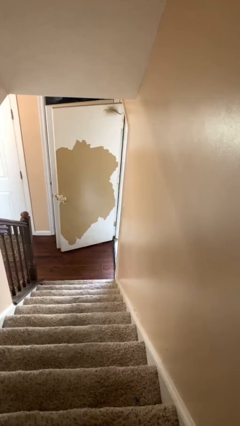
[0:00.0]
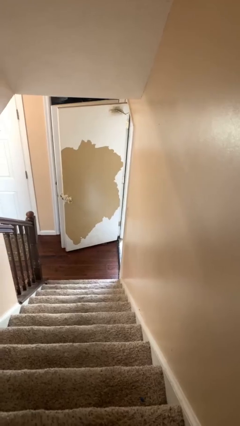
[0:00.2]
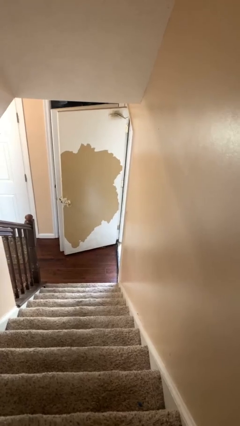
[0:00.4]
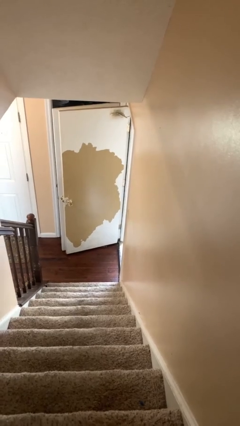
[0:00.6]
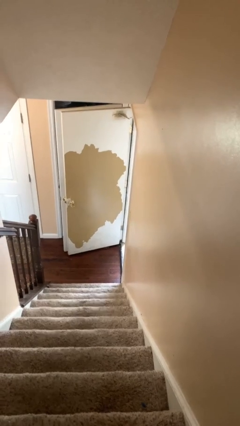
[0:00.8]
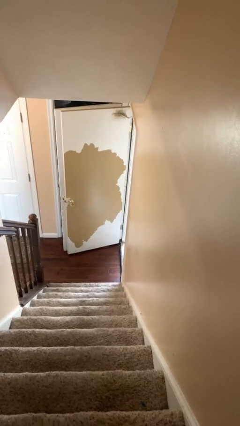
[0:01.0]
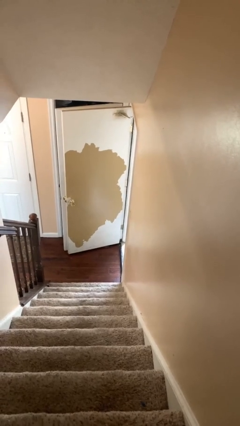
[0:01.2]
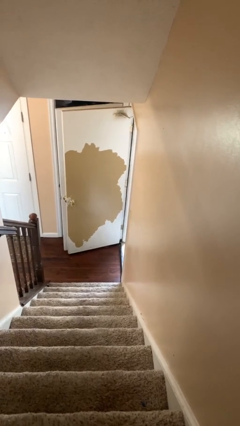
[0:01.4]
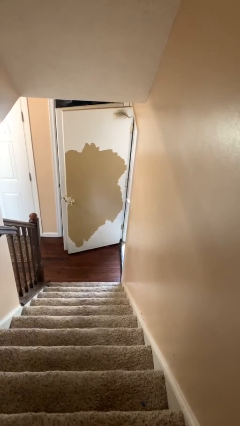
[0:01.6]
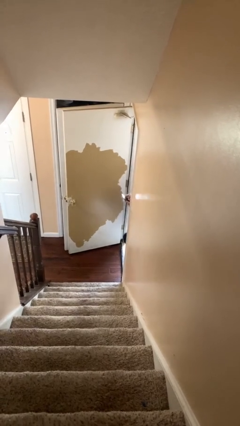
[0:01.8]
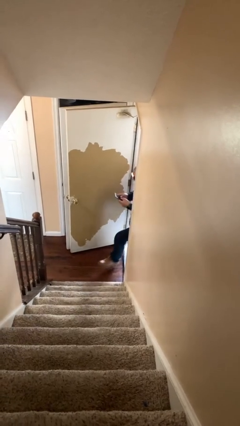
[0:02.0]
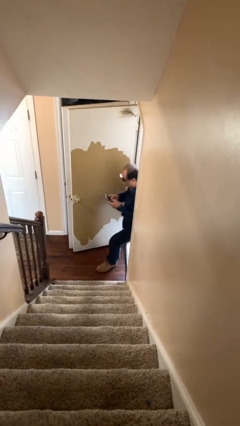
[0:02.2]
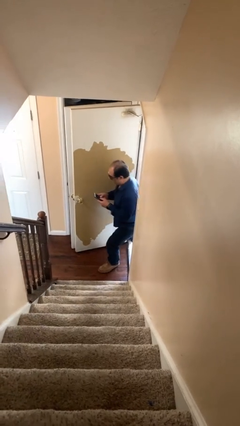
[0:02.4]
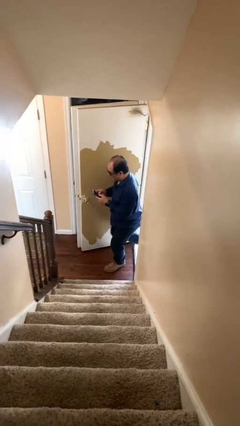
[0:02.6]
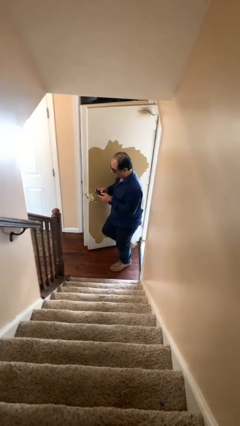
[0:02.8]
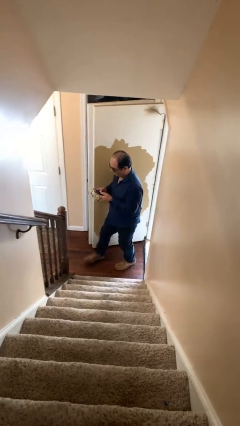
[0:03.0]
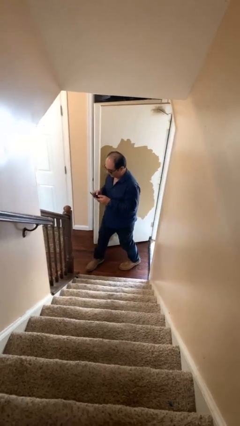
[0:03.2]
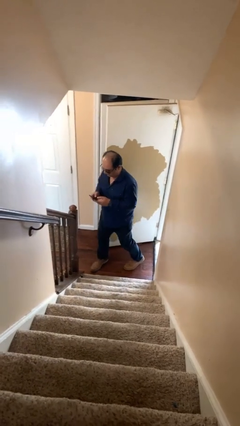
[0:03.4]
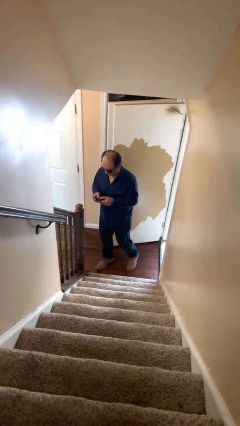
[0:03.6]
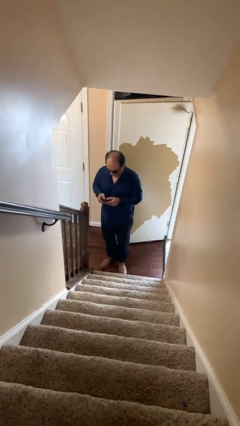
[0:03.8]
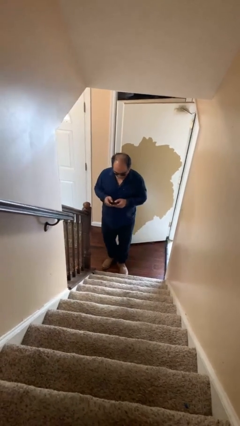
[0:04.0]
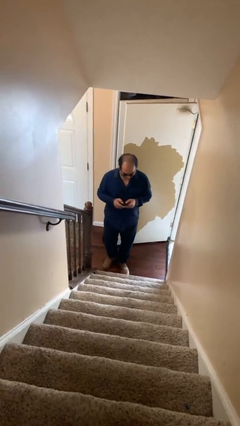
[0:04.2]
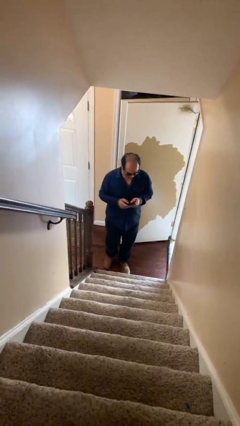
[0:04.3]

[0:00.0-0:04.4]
person enters scene through structure

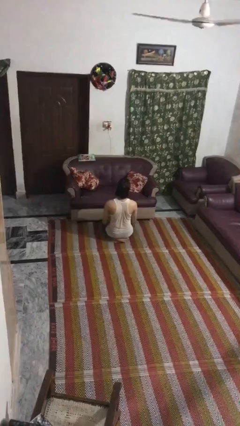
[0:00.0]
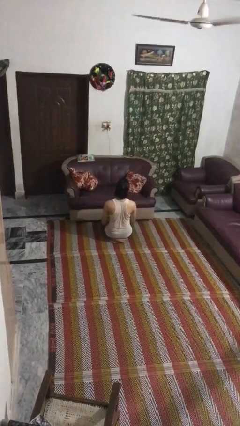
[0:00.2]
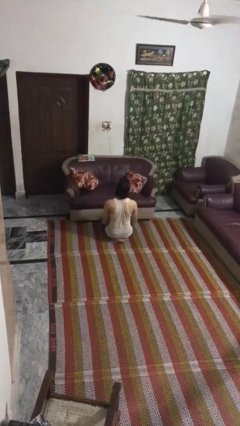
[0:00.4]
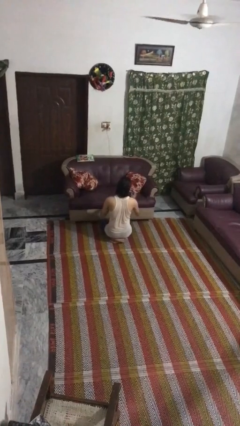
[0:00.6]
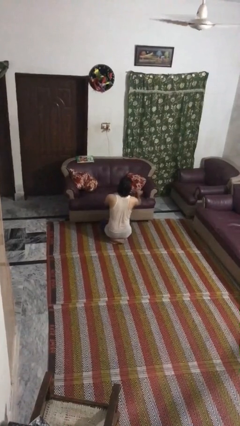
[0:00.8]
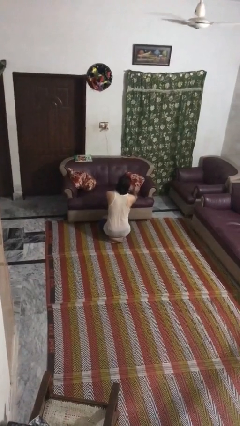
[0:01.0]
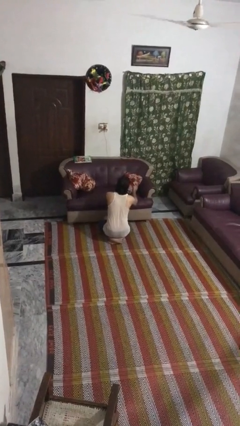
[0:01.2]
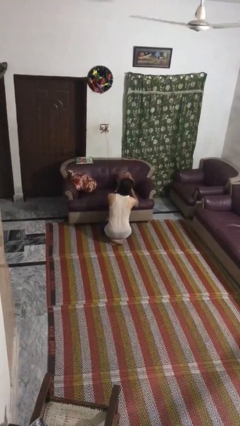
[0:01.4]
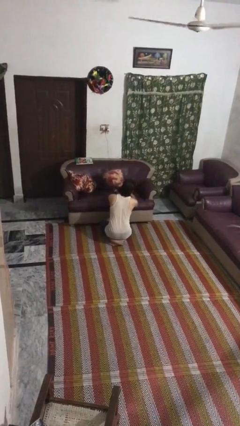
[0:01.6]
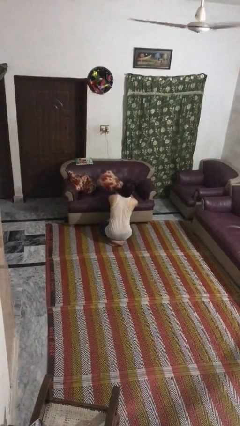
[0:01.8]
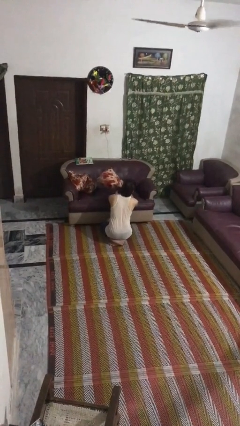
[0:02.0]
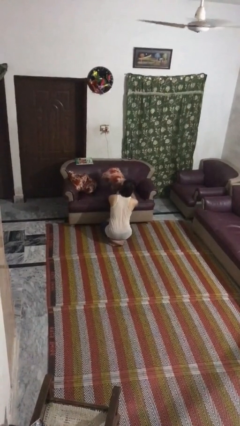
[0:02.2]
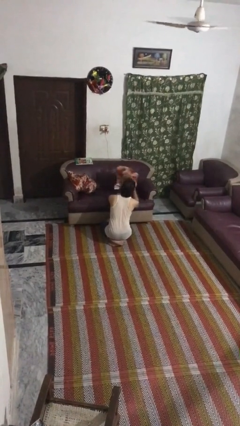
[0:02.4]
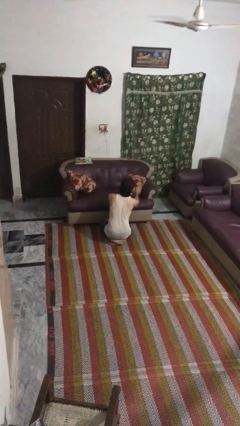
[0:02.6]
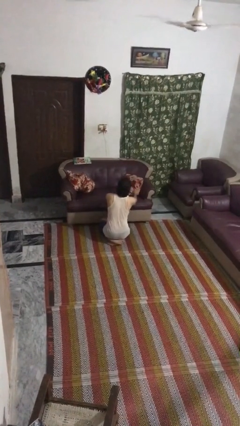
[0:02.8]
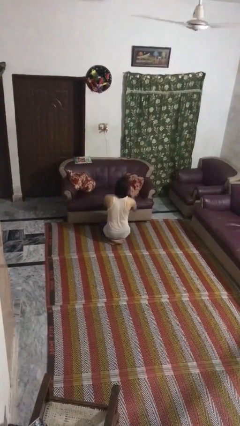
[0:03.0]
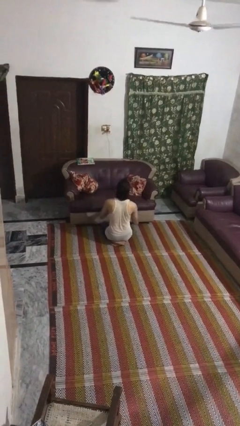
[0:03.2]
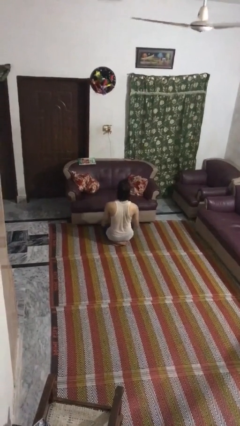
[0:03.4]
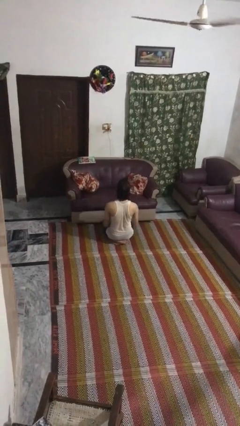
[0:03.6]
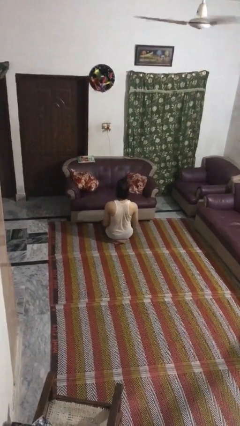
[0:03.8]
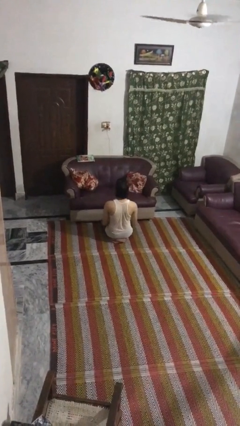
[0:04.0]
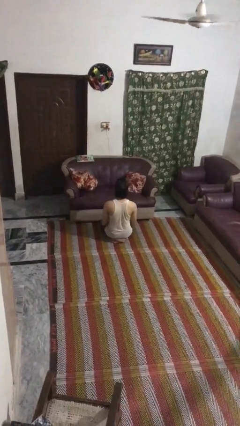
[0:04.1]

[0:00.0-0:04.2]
person searches in couch

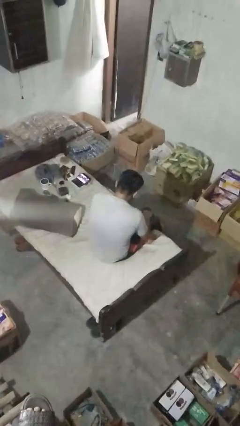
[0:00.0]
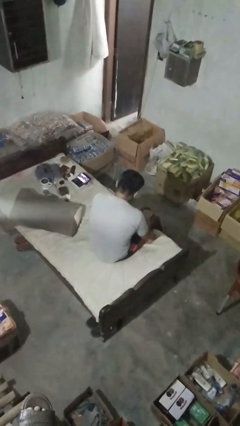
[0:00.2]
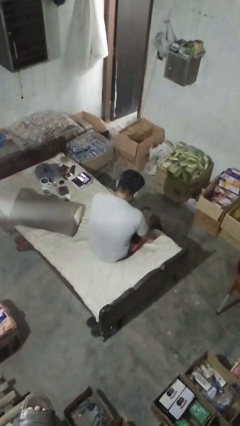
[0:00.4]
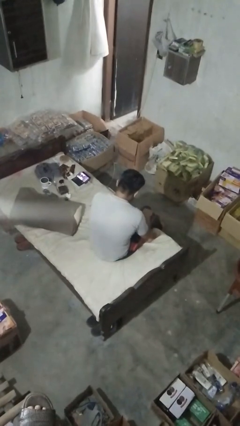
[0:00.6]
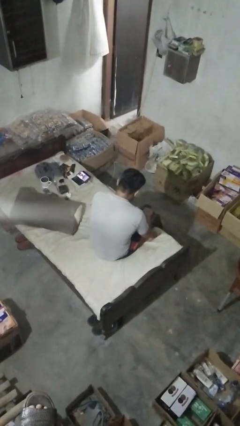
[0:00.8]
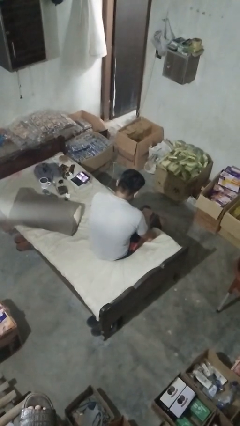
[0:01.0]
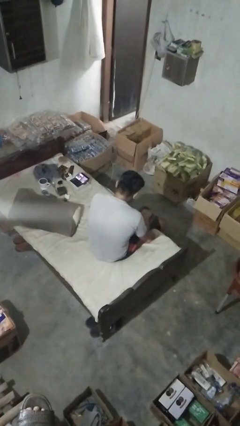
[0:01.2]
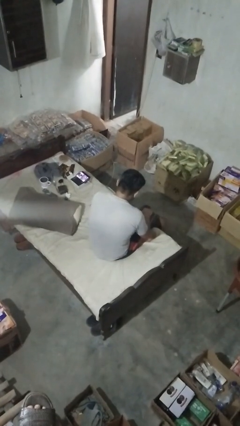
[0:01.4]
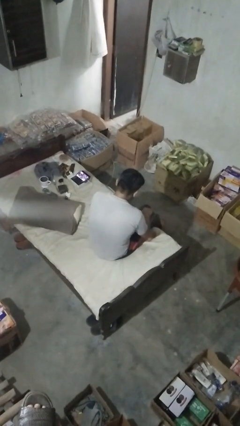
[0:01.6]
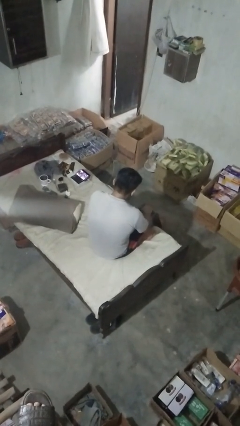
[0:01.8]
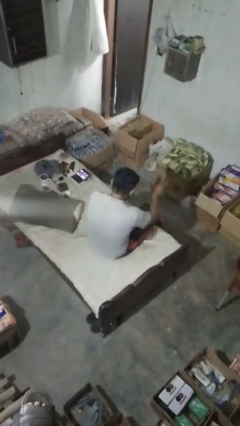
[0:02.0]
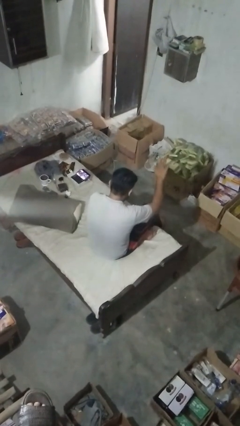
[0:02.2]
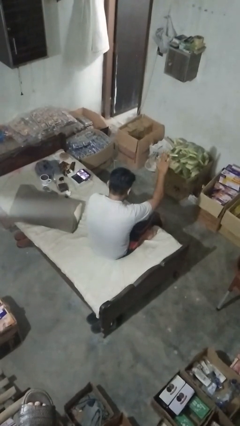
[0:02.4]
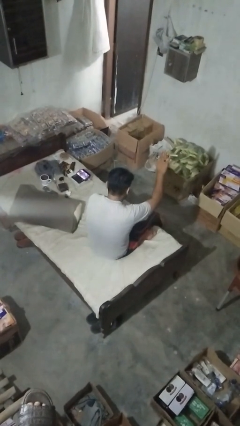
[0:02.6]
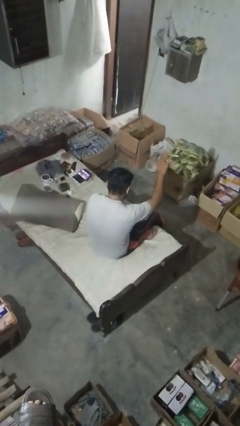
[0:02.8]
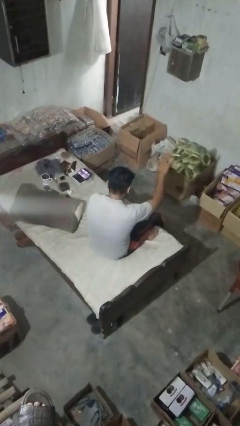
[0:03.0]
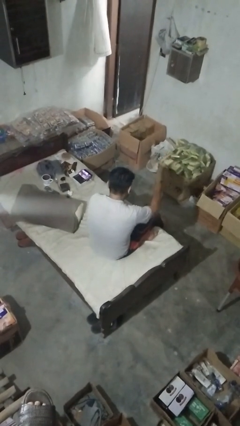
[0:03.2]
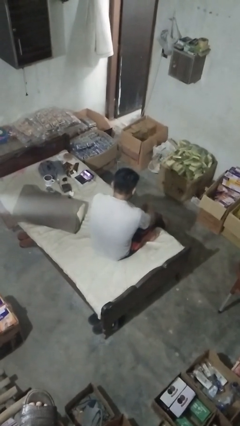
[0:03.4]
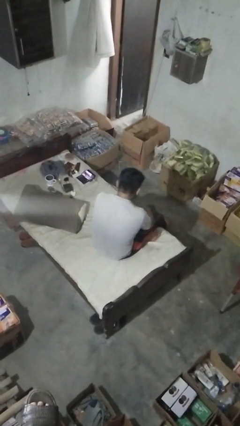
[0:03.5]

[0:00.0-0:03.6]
person gestures stop

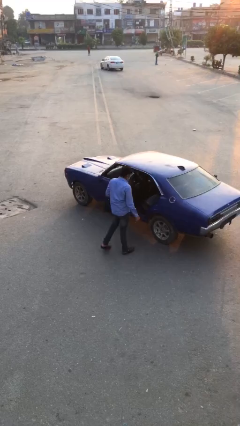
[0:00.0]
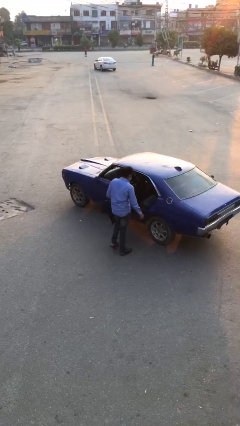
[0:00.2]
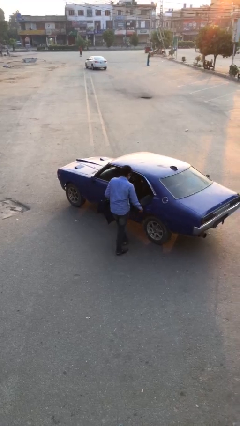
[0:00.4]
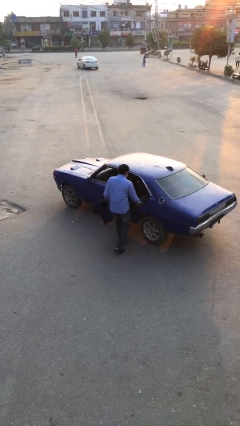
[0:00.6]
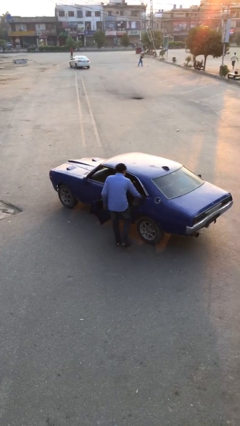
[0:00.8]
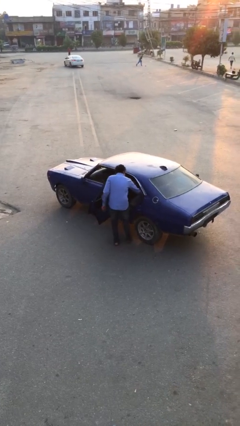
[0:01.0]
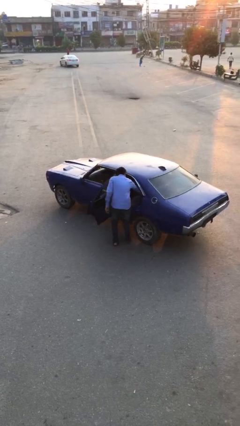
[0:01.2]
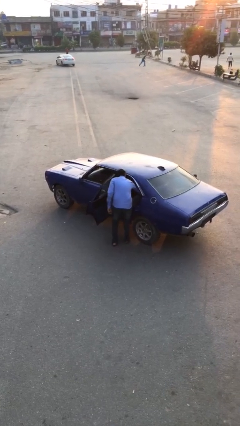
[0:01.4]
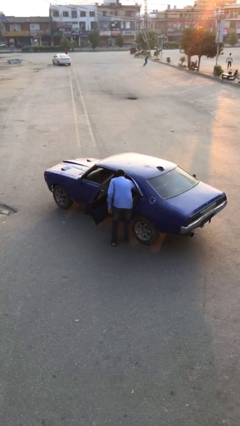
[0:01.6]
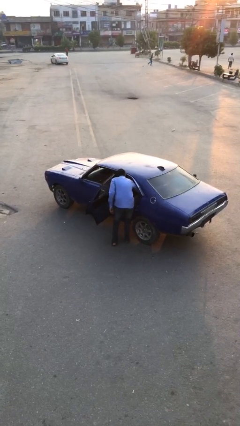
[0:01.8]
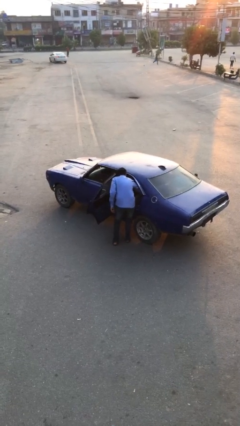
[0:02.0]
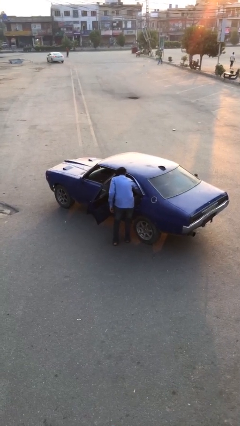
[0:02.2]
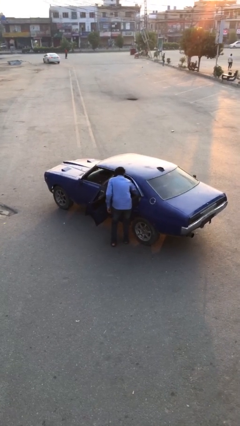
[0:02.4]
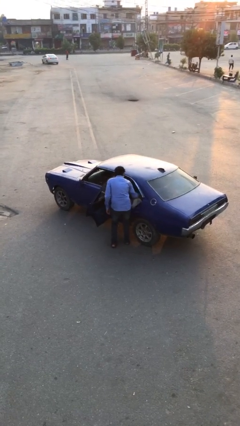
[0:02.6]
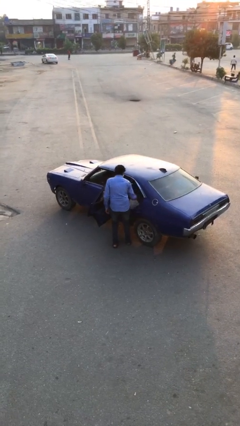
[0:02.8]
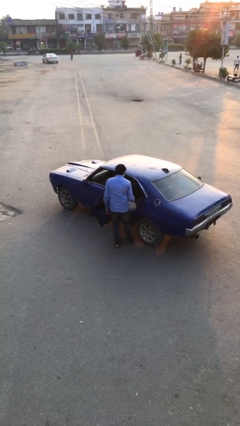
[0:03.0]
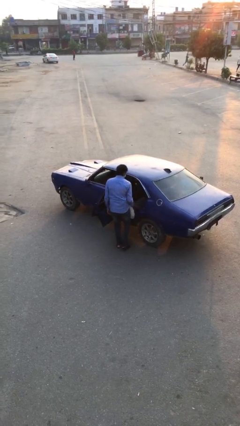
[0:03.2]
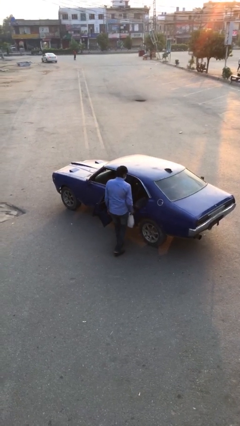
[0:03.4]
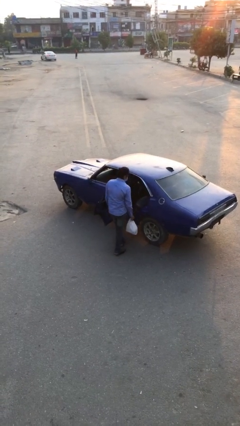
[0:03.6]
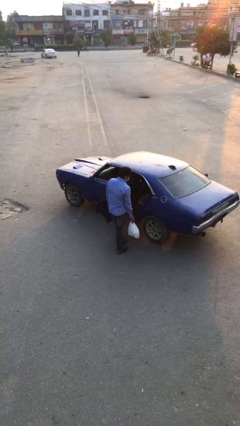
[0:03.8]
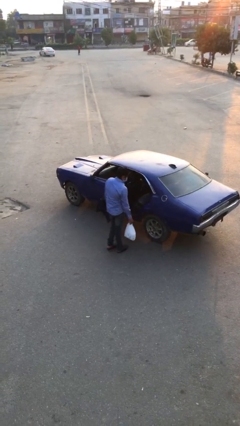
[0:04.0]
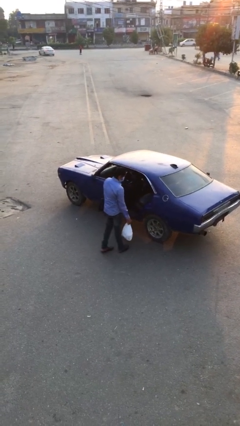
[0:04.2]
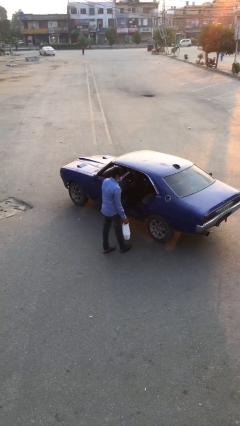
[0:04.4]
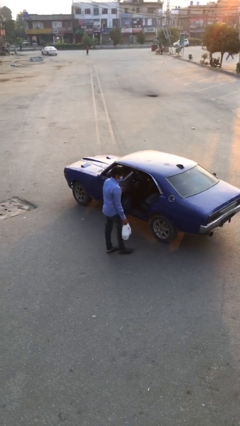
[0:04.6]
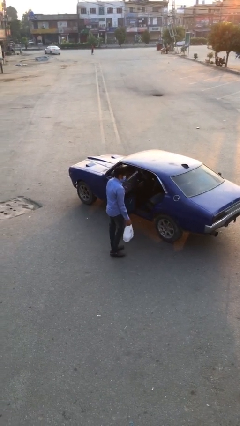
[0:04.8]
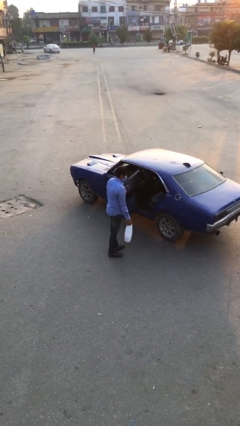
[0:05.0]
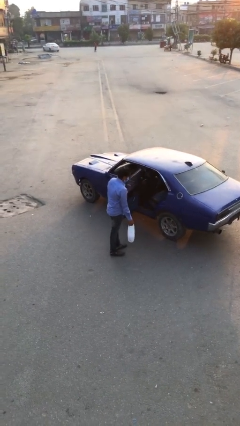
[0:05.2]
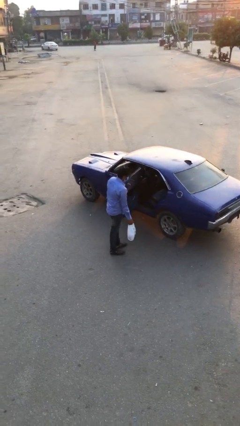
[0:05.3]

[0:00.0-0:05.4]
person unloads car

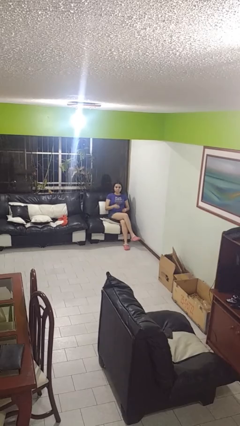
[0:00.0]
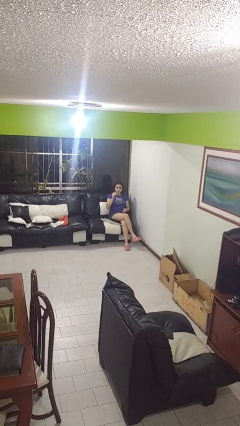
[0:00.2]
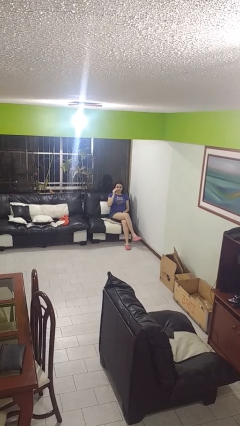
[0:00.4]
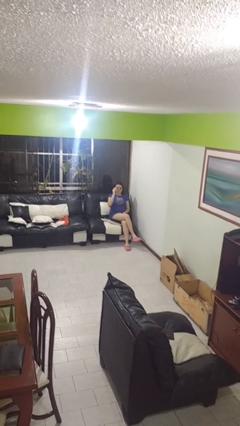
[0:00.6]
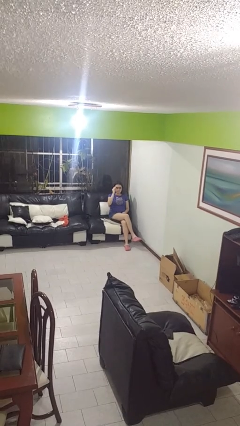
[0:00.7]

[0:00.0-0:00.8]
person puts on glasses
